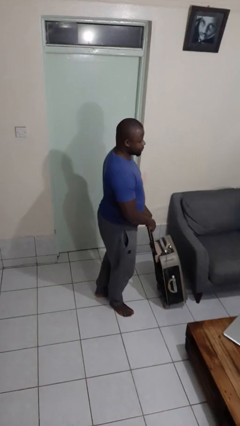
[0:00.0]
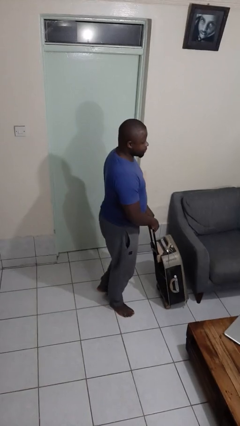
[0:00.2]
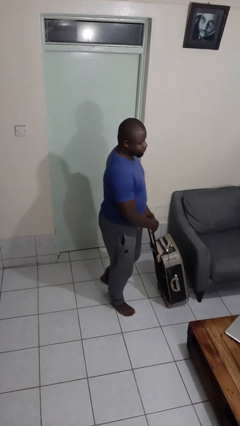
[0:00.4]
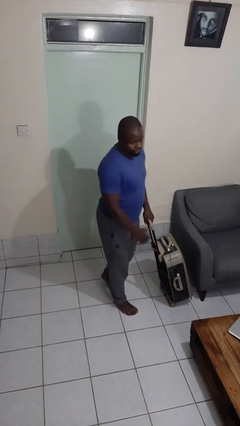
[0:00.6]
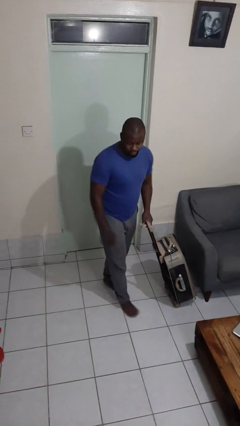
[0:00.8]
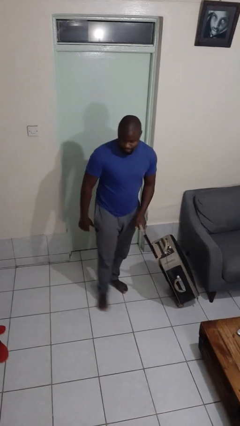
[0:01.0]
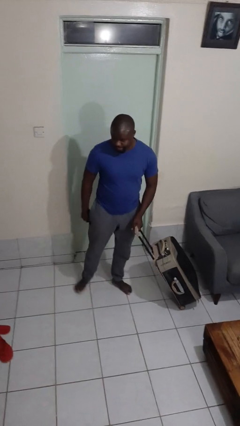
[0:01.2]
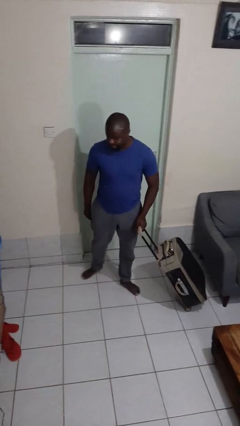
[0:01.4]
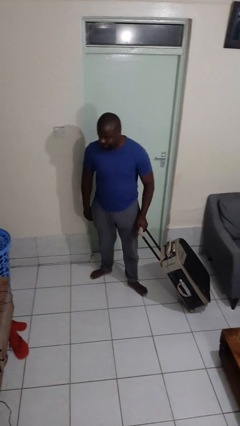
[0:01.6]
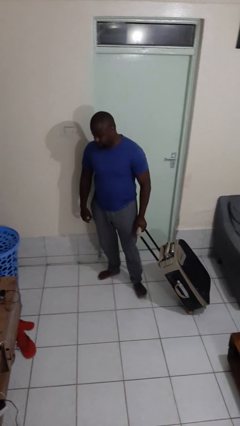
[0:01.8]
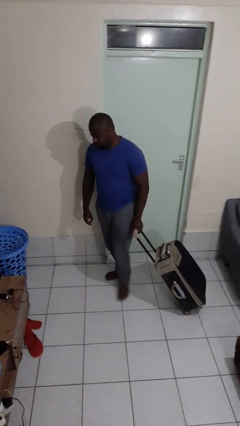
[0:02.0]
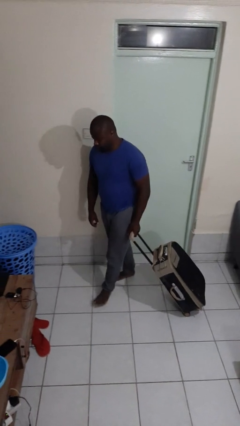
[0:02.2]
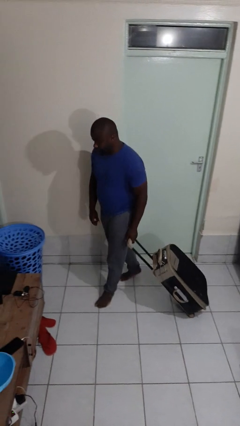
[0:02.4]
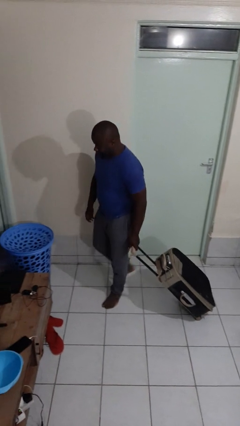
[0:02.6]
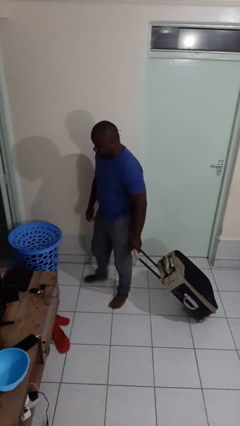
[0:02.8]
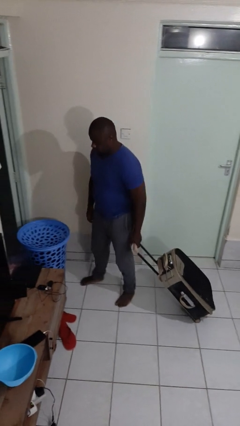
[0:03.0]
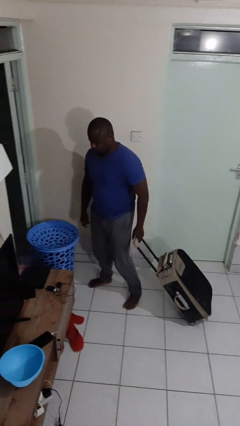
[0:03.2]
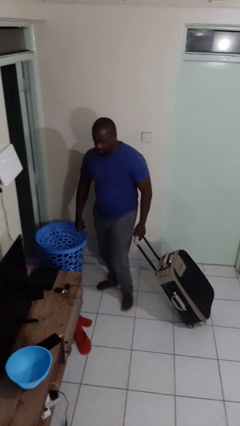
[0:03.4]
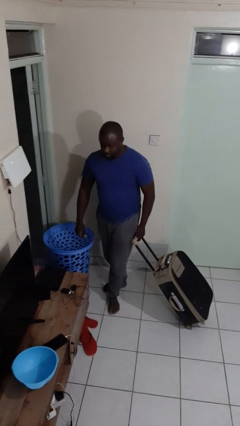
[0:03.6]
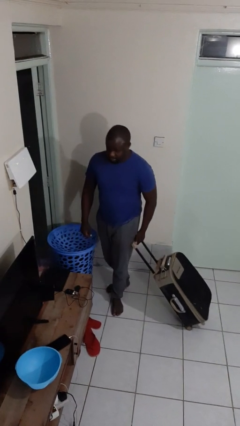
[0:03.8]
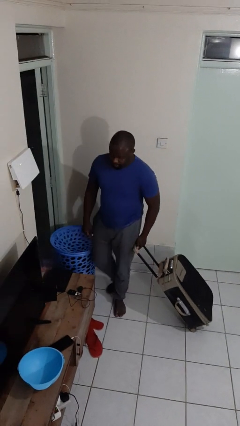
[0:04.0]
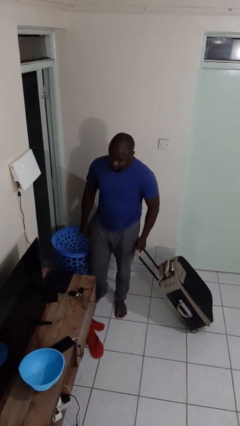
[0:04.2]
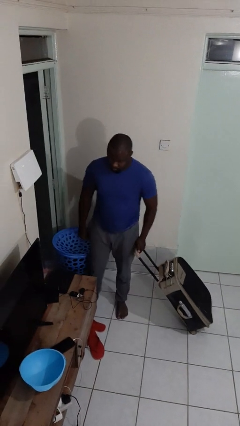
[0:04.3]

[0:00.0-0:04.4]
person pulls wheeled cart

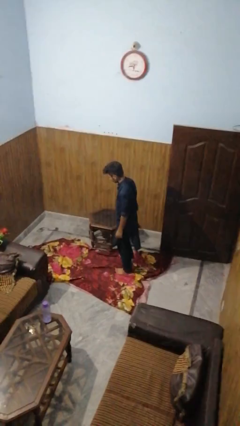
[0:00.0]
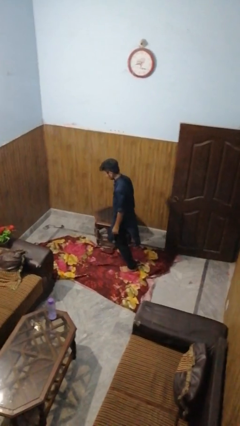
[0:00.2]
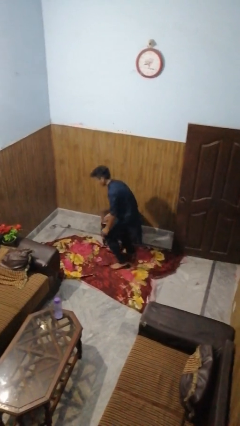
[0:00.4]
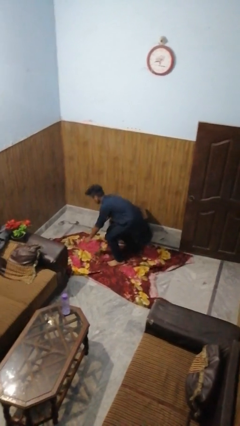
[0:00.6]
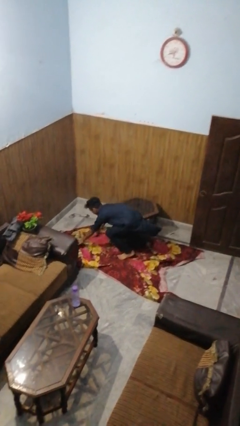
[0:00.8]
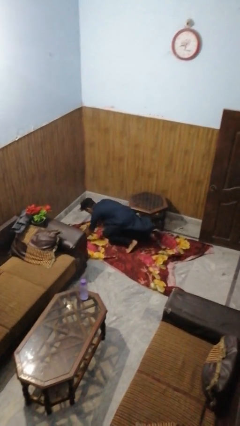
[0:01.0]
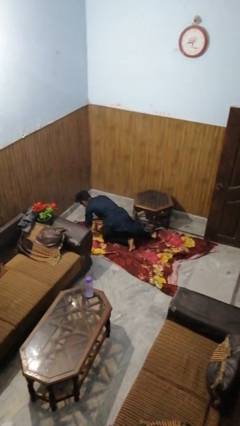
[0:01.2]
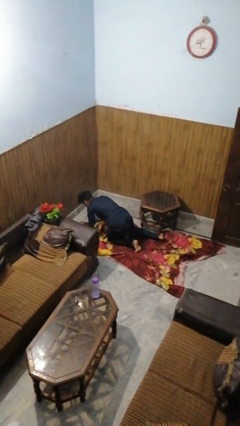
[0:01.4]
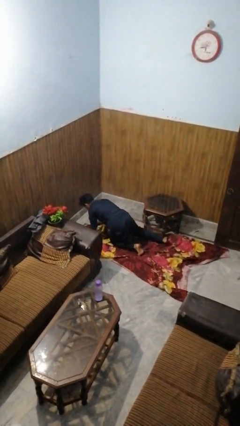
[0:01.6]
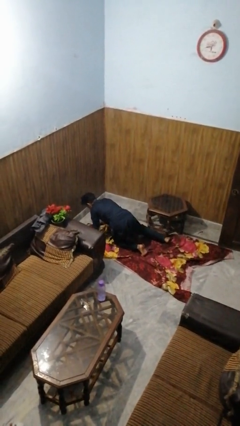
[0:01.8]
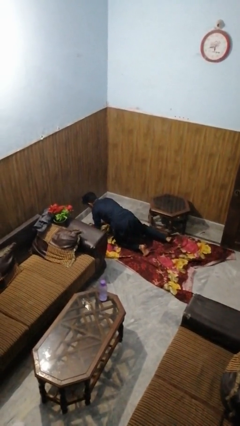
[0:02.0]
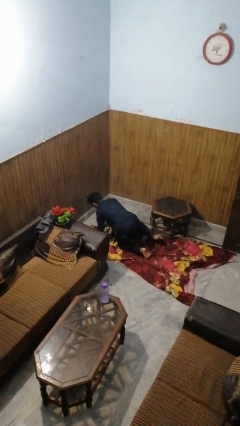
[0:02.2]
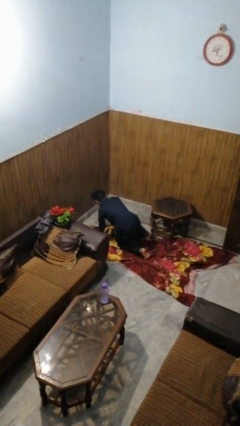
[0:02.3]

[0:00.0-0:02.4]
person bumps into table

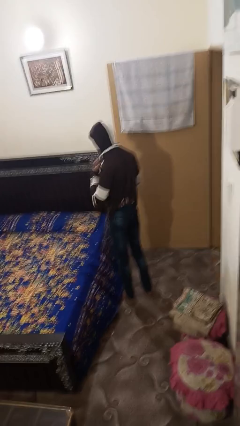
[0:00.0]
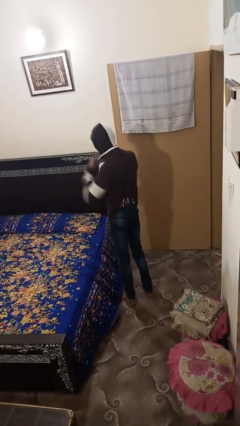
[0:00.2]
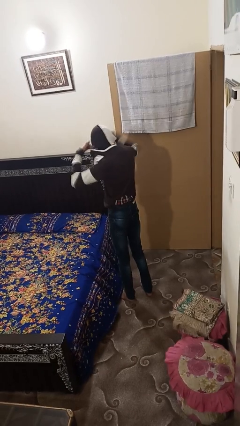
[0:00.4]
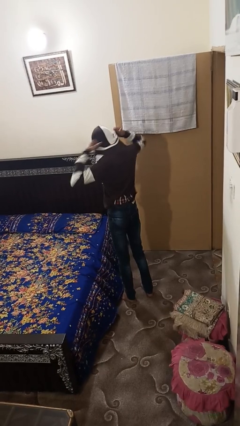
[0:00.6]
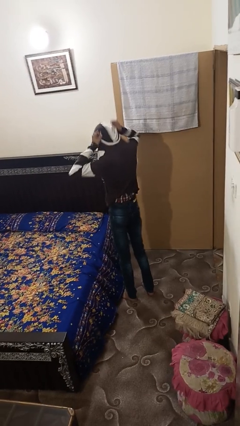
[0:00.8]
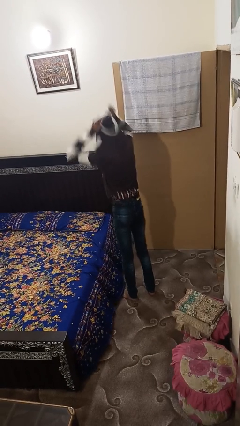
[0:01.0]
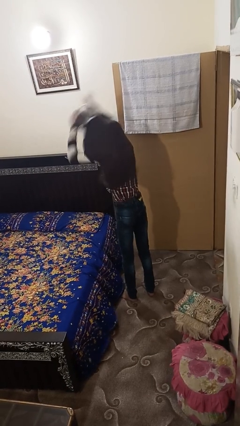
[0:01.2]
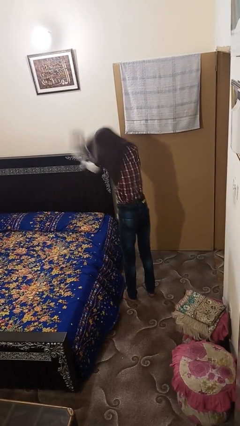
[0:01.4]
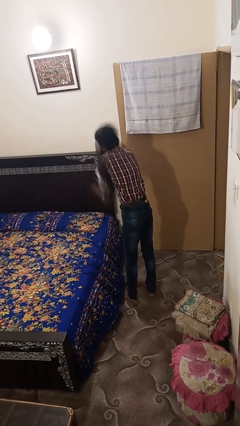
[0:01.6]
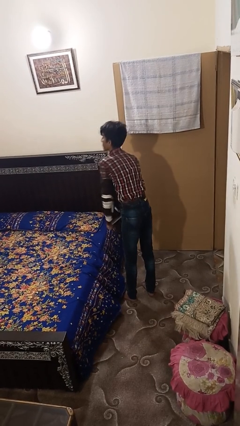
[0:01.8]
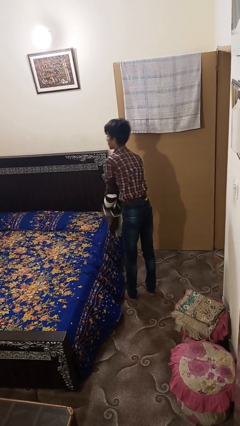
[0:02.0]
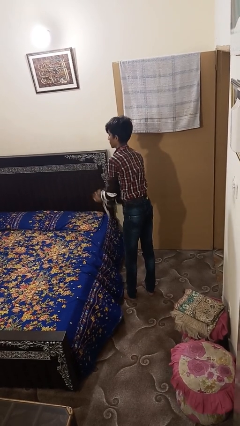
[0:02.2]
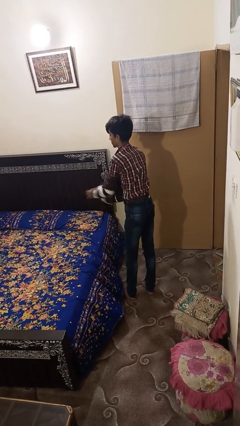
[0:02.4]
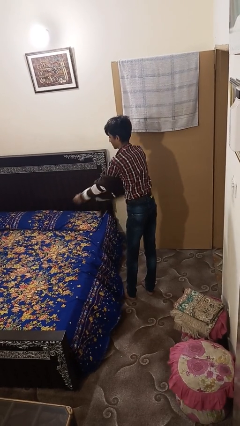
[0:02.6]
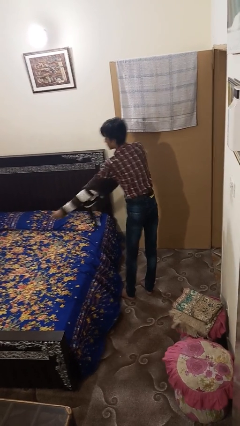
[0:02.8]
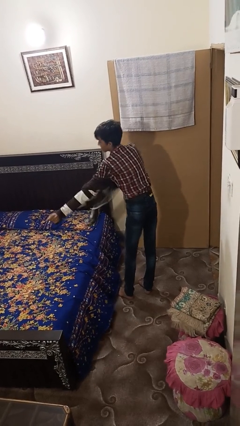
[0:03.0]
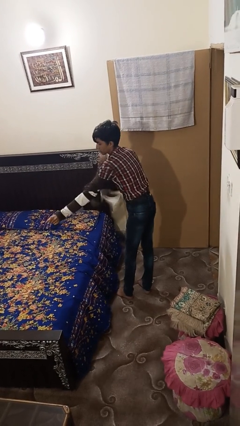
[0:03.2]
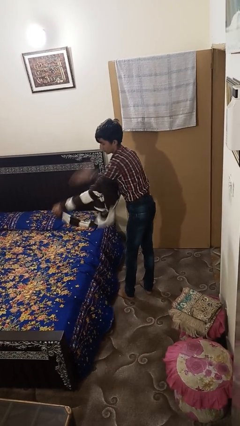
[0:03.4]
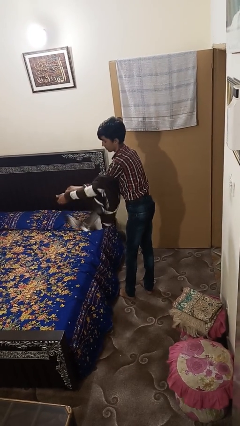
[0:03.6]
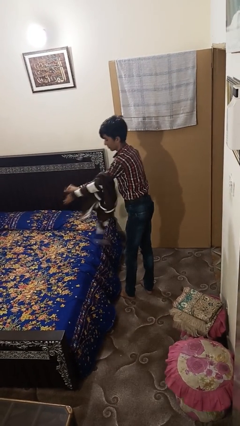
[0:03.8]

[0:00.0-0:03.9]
person takes off hoodie

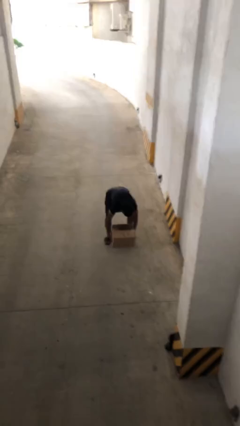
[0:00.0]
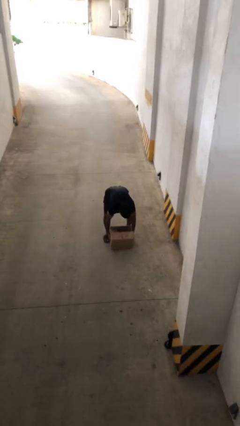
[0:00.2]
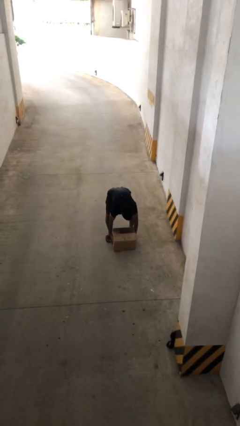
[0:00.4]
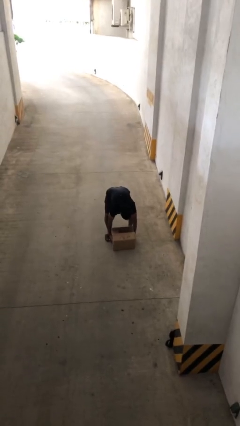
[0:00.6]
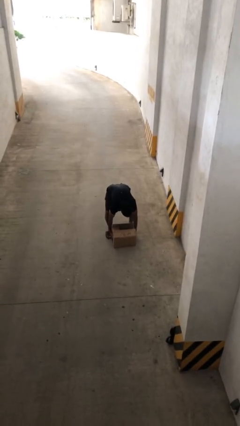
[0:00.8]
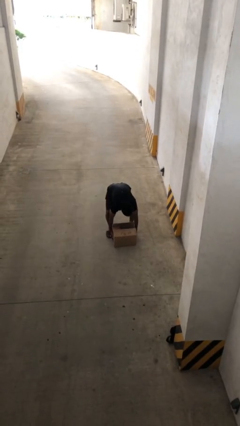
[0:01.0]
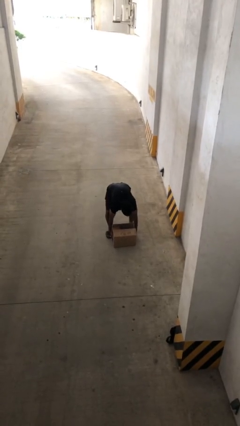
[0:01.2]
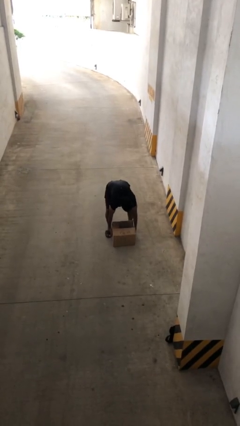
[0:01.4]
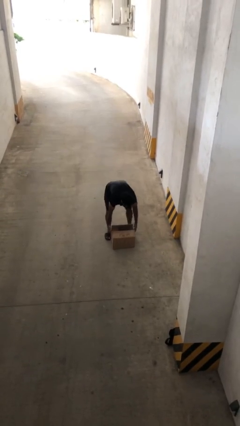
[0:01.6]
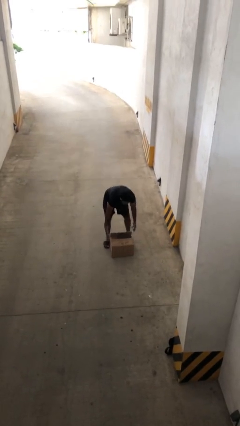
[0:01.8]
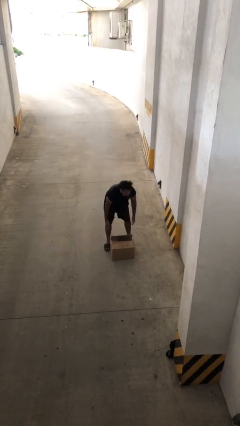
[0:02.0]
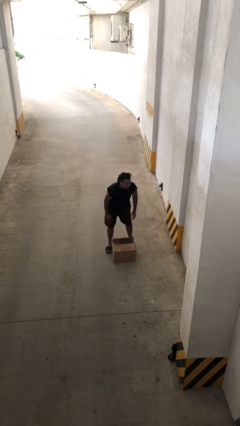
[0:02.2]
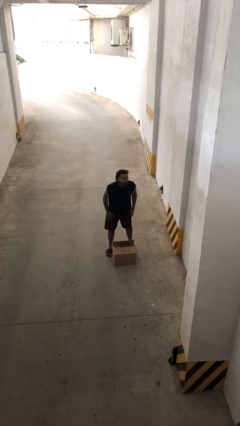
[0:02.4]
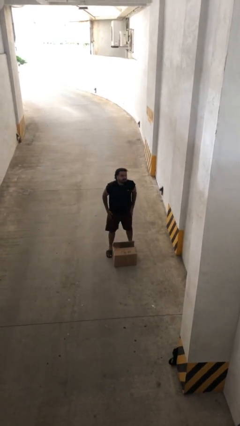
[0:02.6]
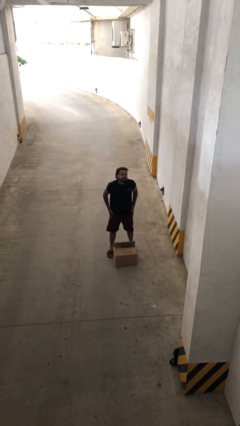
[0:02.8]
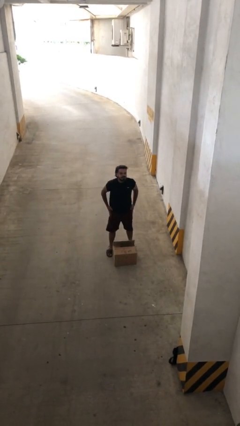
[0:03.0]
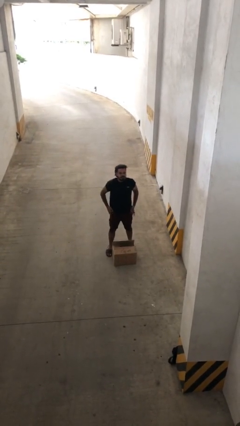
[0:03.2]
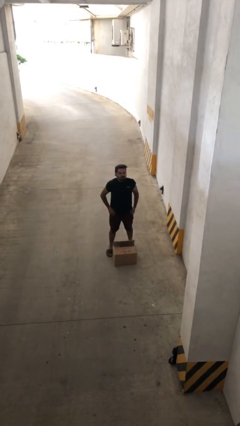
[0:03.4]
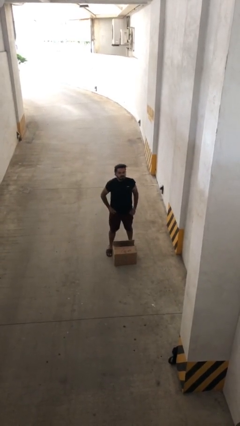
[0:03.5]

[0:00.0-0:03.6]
person puts down object on floor

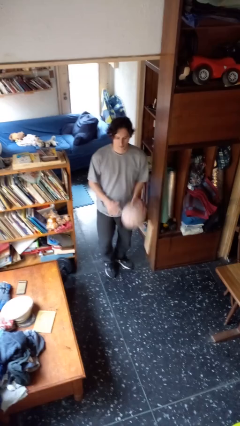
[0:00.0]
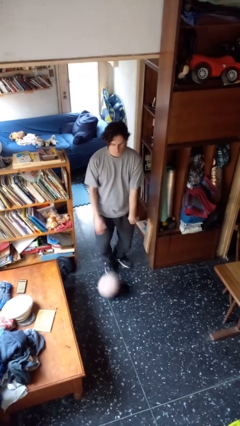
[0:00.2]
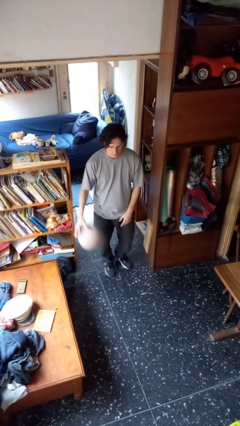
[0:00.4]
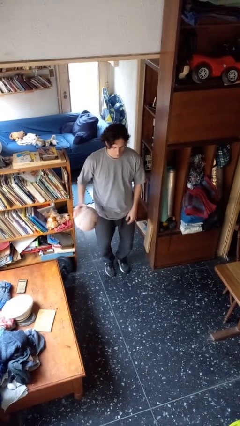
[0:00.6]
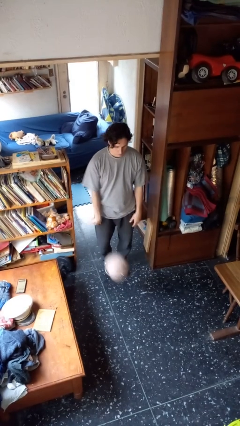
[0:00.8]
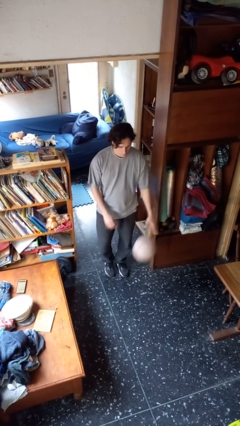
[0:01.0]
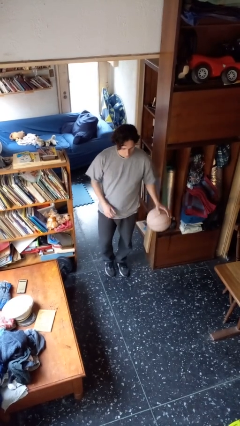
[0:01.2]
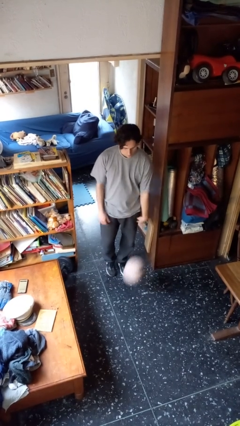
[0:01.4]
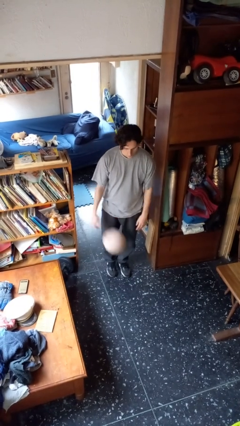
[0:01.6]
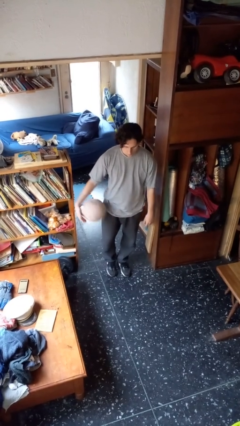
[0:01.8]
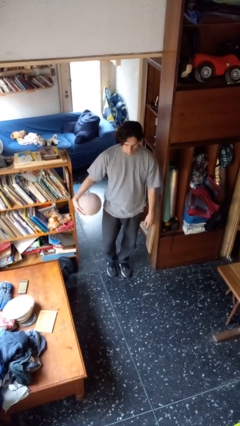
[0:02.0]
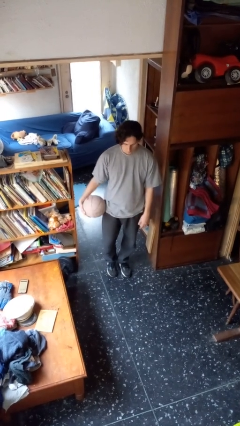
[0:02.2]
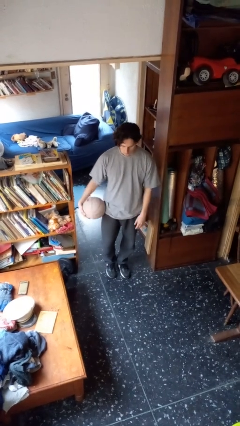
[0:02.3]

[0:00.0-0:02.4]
person bounces ball on floor

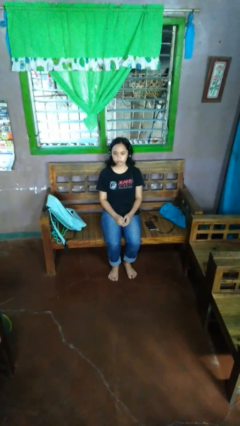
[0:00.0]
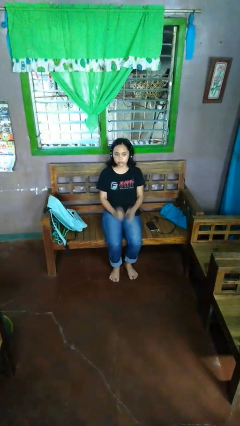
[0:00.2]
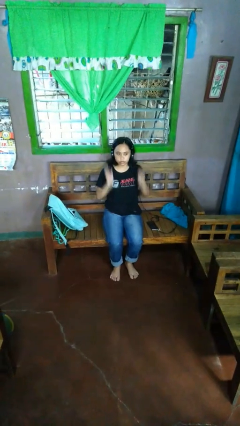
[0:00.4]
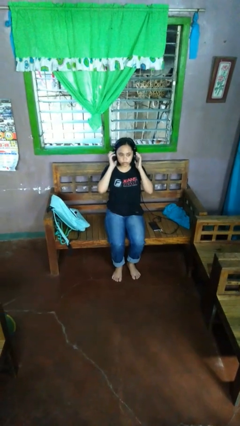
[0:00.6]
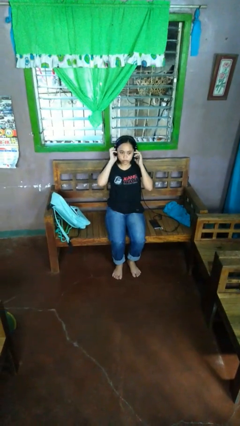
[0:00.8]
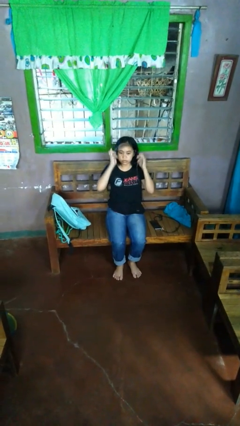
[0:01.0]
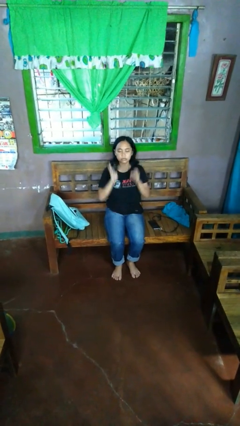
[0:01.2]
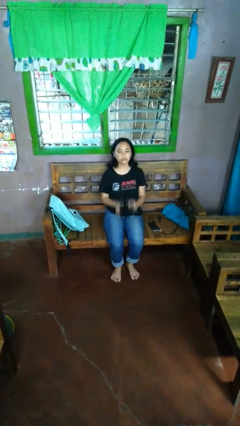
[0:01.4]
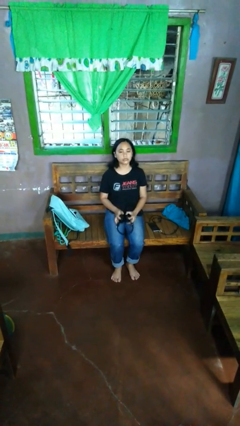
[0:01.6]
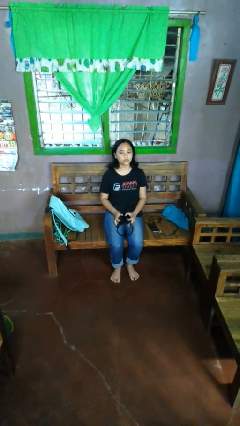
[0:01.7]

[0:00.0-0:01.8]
person takes off headphones
